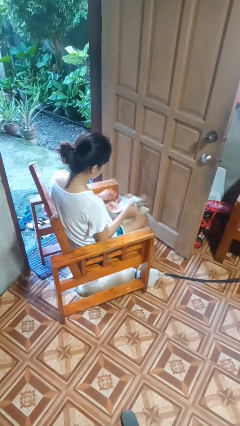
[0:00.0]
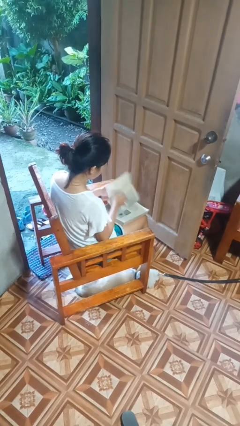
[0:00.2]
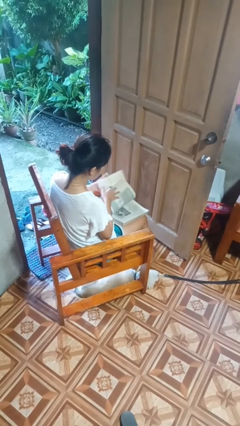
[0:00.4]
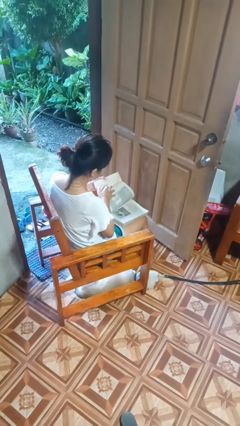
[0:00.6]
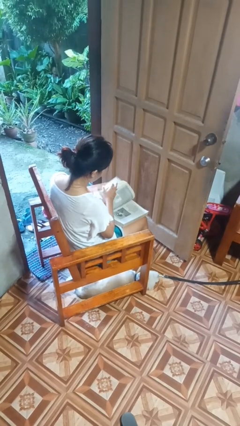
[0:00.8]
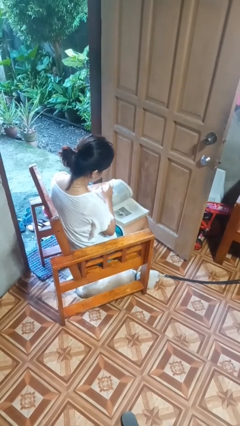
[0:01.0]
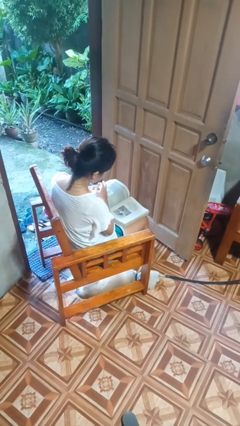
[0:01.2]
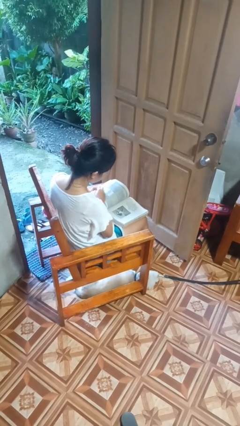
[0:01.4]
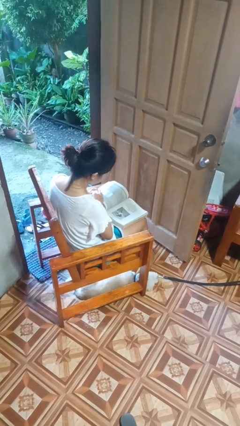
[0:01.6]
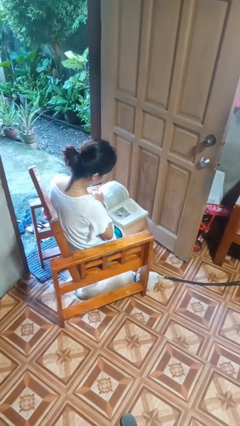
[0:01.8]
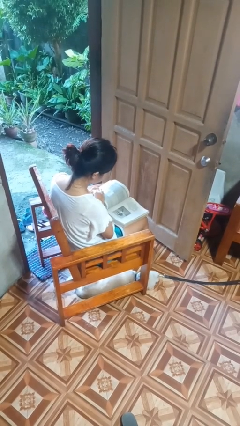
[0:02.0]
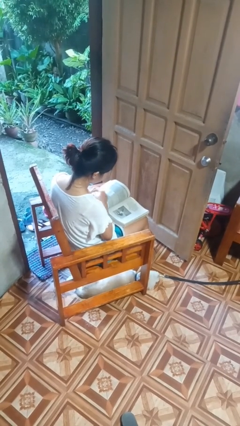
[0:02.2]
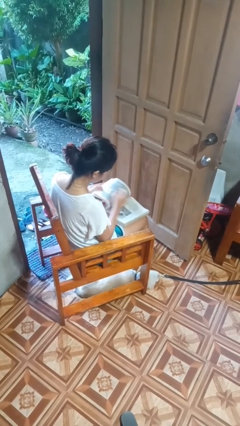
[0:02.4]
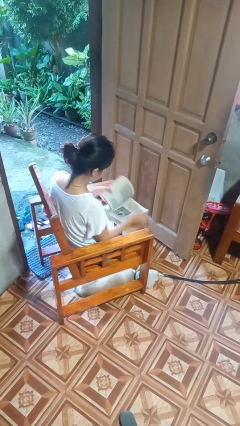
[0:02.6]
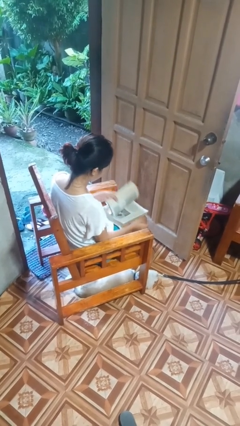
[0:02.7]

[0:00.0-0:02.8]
person reads book

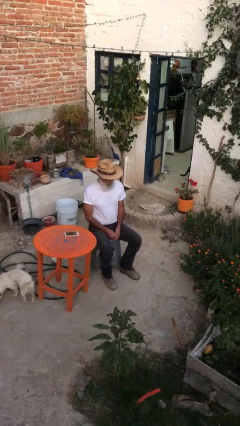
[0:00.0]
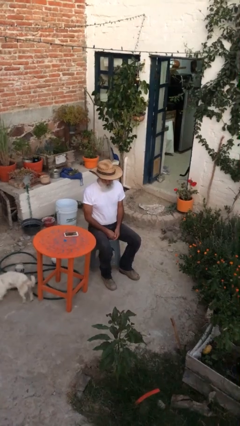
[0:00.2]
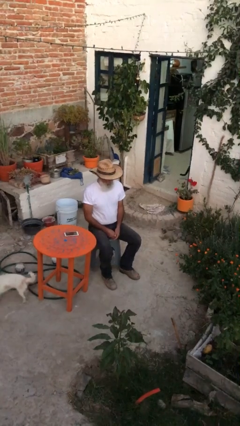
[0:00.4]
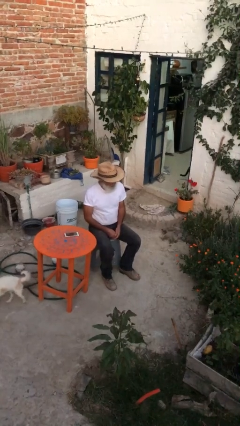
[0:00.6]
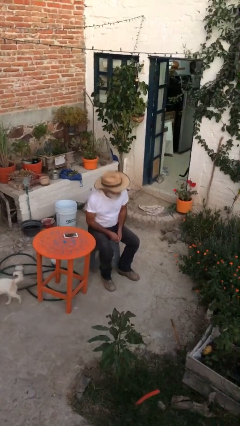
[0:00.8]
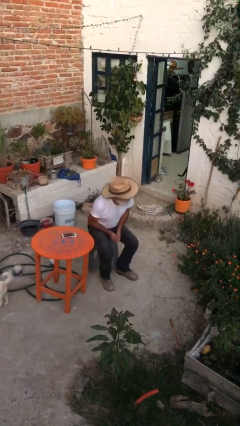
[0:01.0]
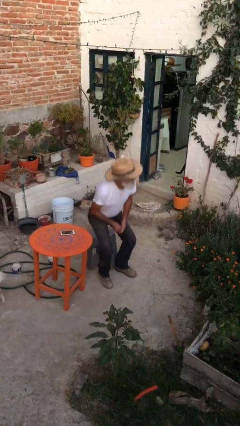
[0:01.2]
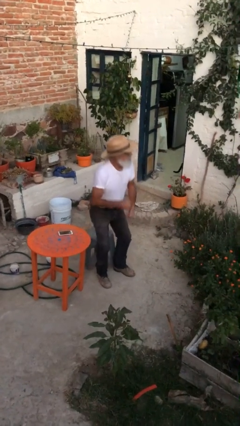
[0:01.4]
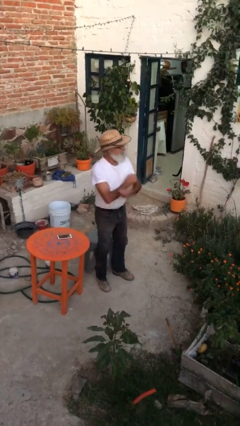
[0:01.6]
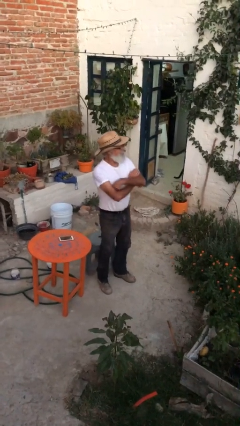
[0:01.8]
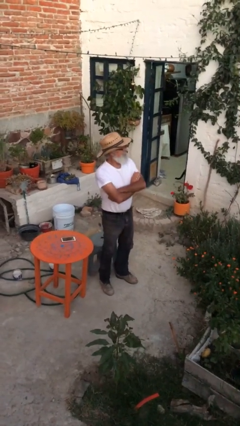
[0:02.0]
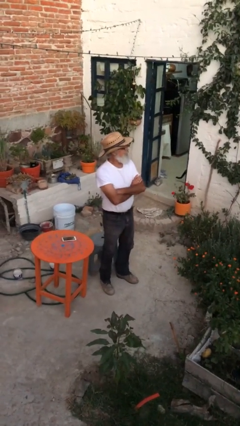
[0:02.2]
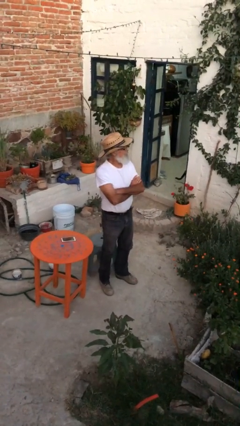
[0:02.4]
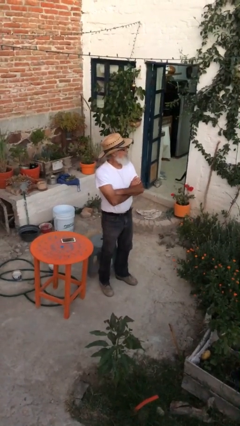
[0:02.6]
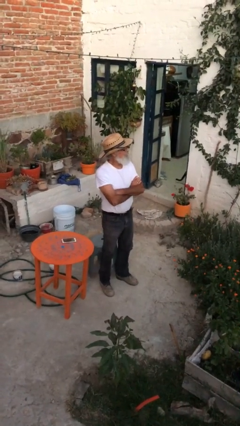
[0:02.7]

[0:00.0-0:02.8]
person stands up

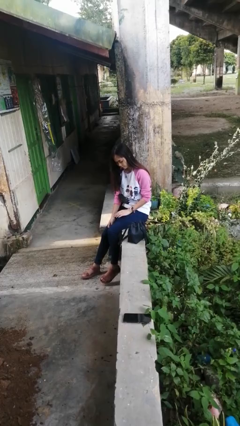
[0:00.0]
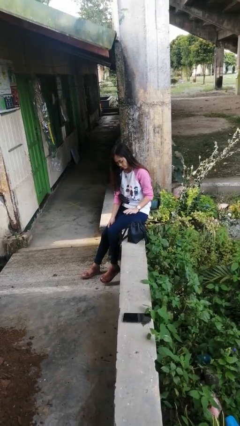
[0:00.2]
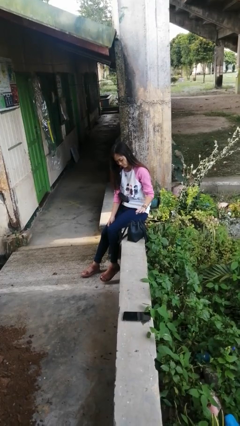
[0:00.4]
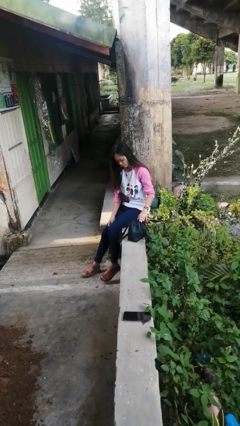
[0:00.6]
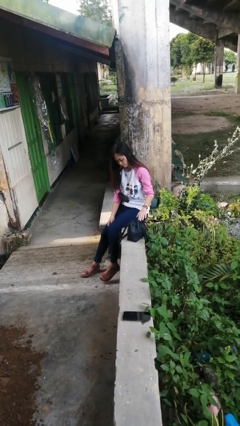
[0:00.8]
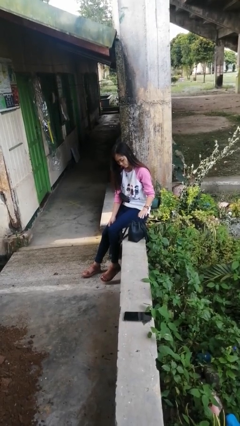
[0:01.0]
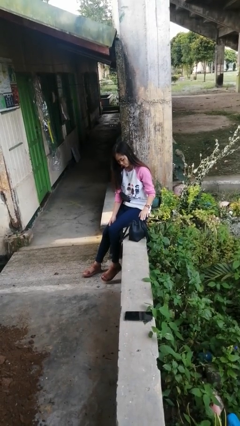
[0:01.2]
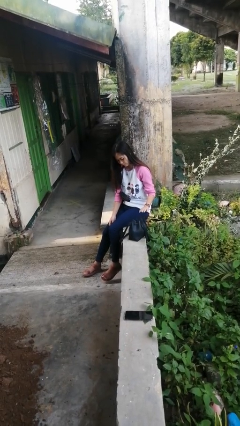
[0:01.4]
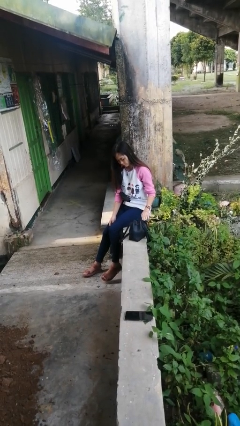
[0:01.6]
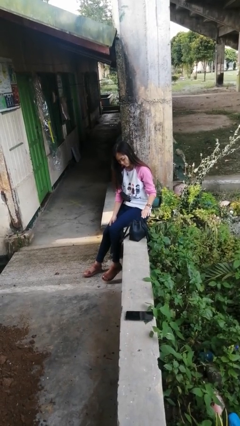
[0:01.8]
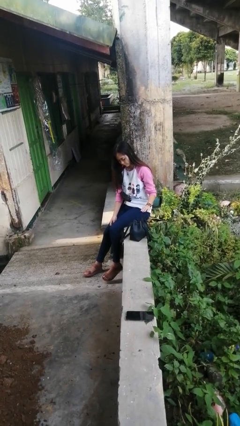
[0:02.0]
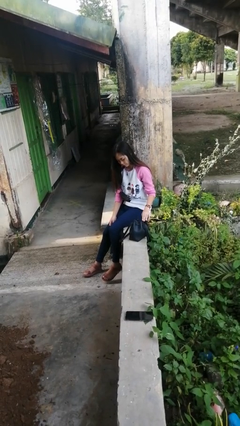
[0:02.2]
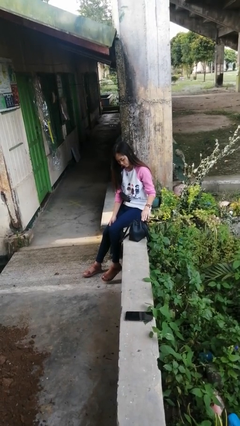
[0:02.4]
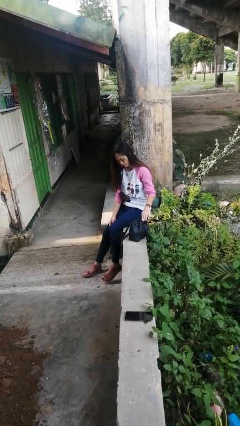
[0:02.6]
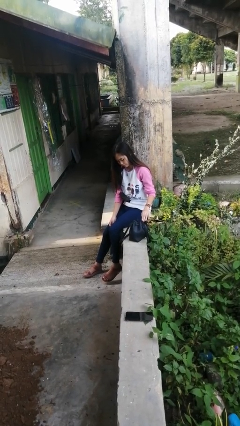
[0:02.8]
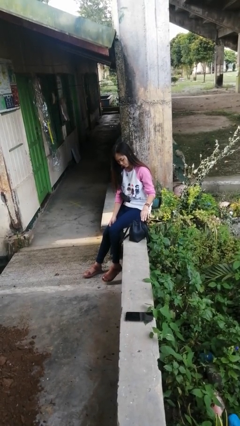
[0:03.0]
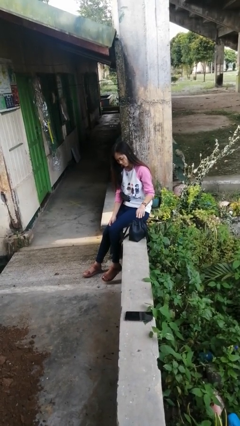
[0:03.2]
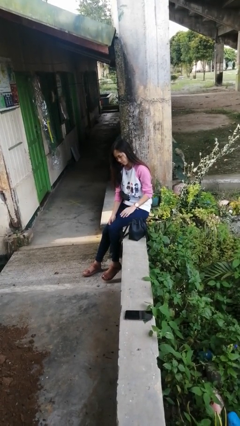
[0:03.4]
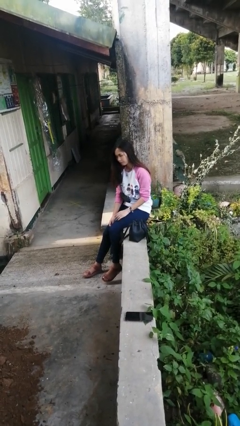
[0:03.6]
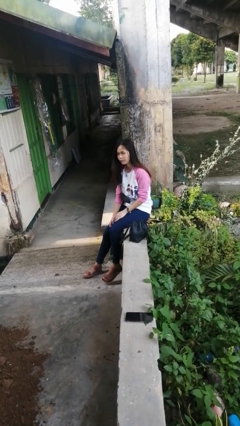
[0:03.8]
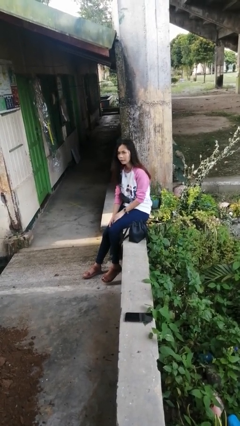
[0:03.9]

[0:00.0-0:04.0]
person taps object with finger

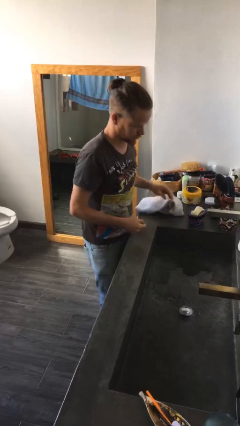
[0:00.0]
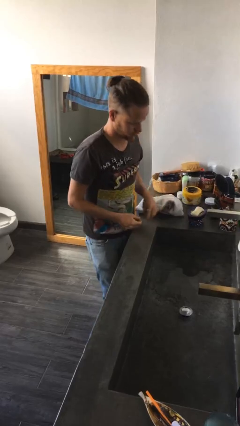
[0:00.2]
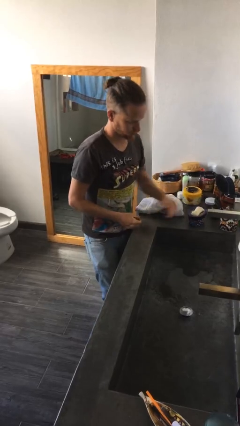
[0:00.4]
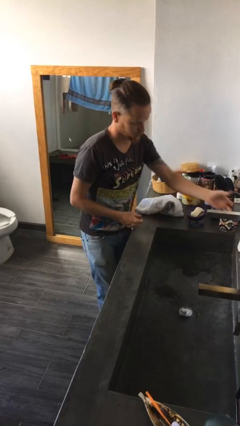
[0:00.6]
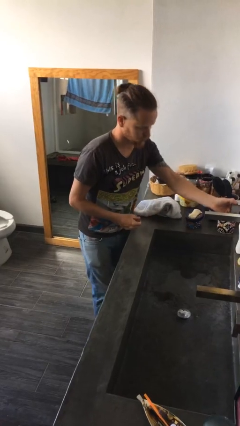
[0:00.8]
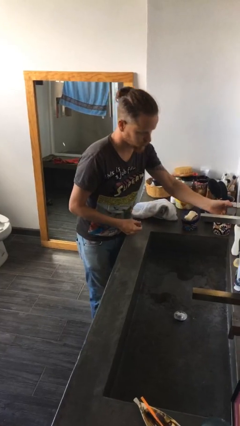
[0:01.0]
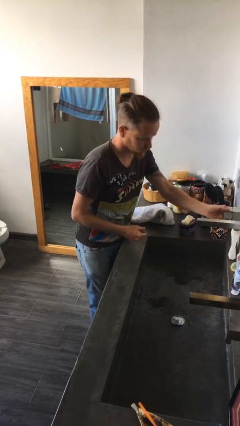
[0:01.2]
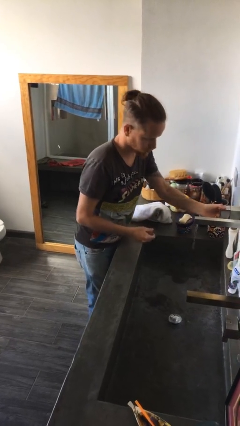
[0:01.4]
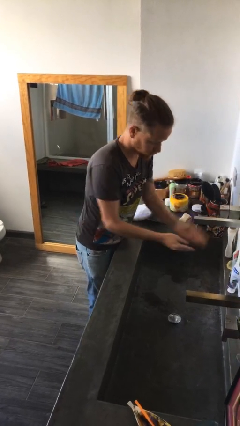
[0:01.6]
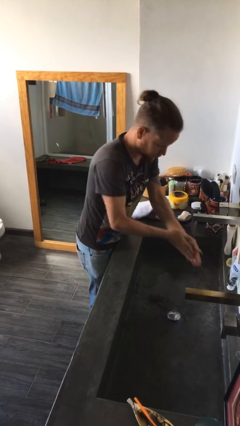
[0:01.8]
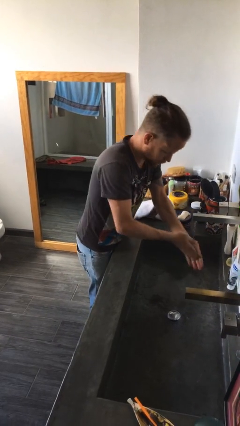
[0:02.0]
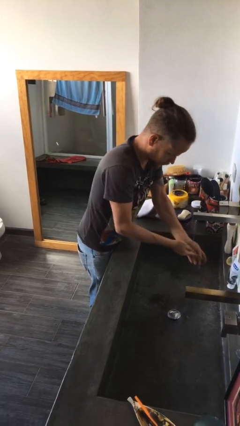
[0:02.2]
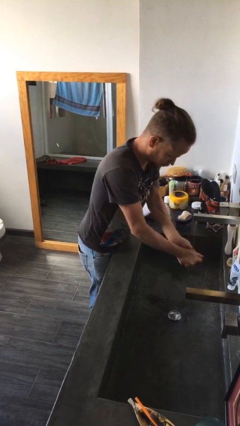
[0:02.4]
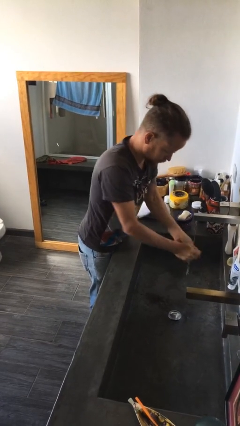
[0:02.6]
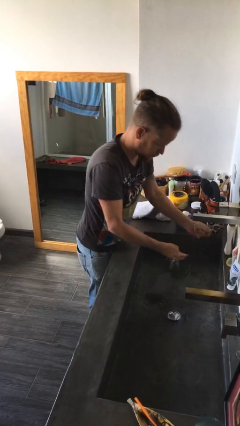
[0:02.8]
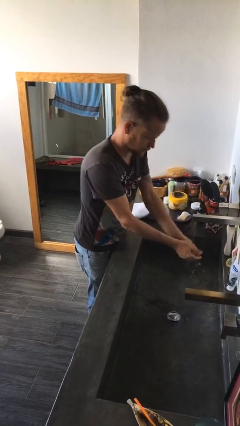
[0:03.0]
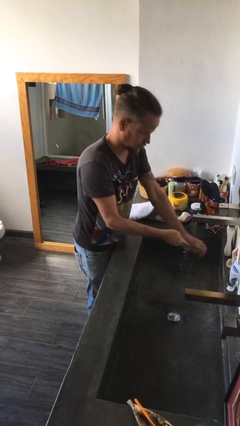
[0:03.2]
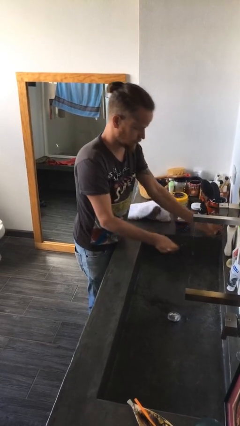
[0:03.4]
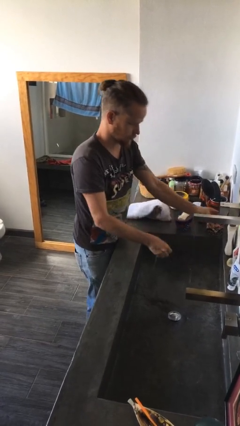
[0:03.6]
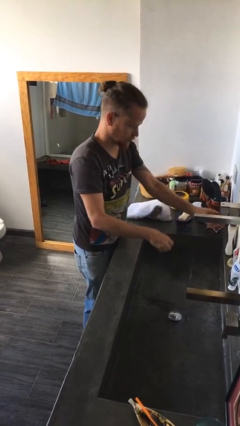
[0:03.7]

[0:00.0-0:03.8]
person washes hands

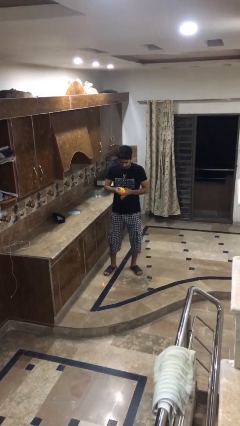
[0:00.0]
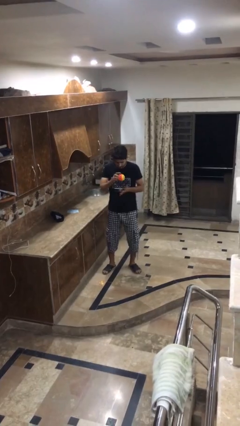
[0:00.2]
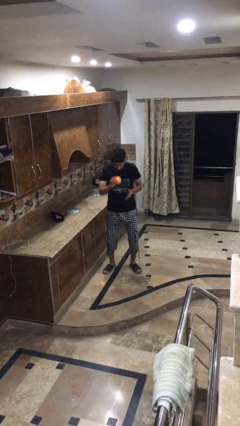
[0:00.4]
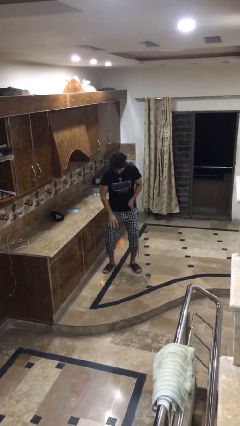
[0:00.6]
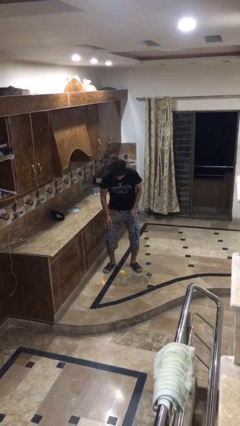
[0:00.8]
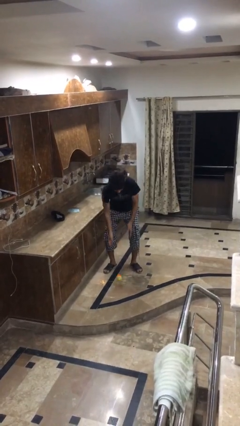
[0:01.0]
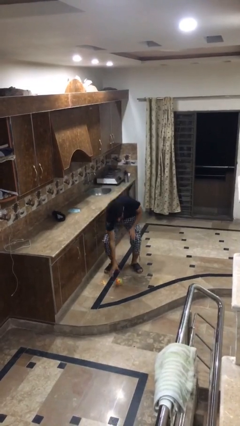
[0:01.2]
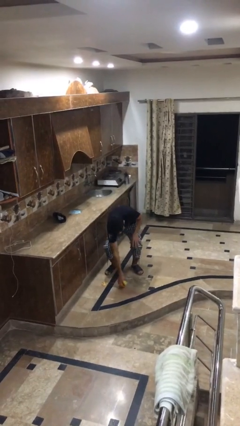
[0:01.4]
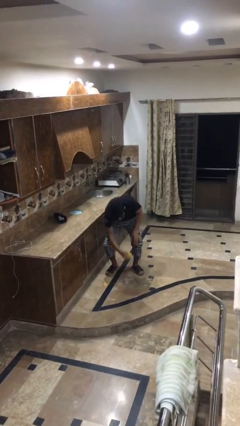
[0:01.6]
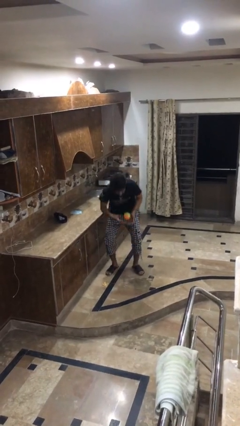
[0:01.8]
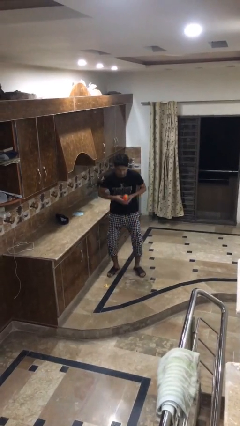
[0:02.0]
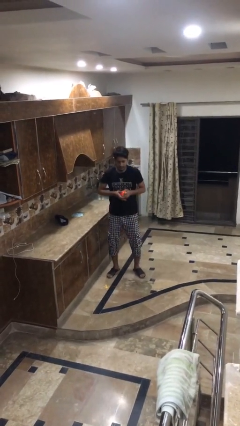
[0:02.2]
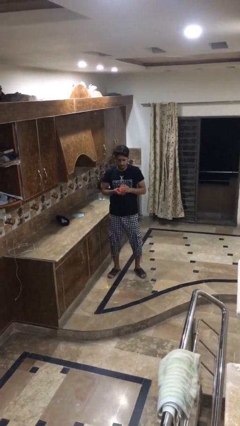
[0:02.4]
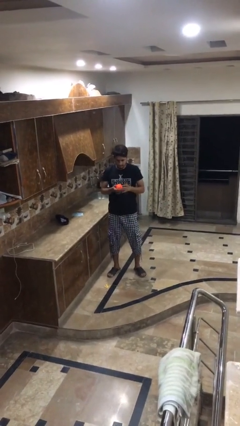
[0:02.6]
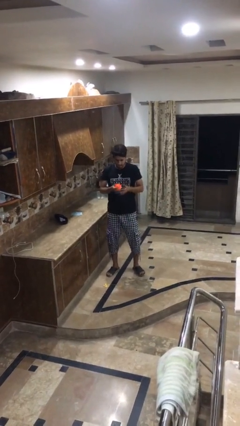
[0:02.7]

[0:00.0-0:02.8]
person bounces ball on floor

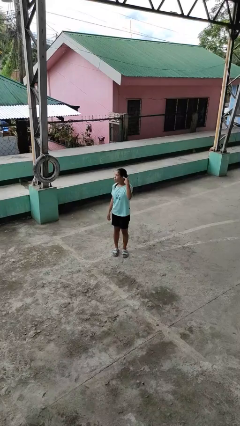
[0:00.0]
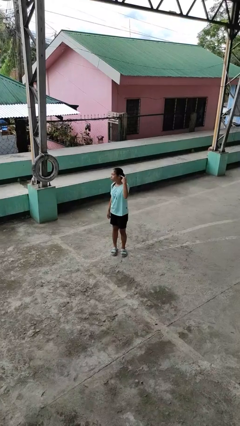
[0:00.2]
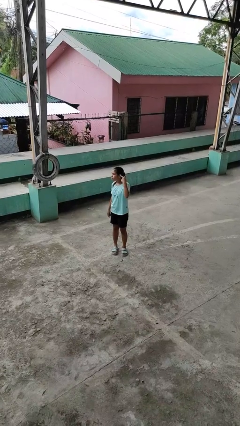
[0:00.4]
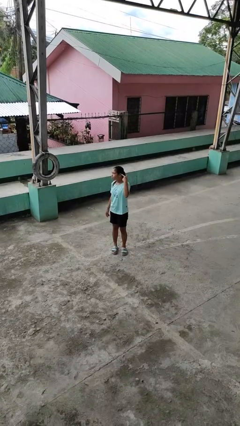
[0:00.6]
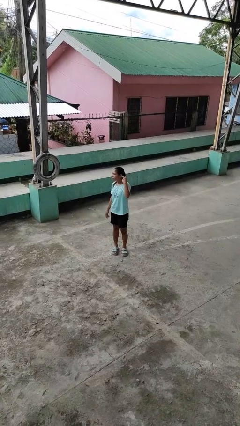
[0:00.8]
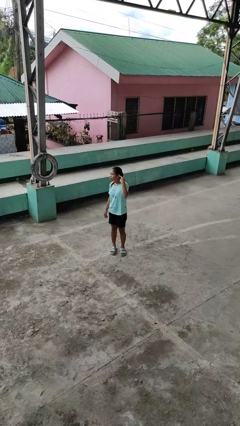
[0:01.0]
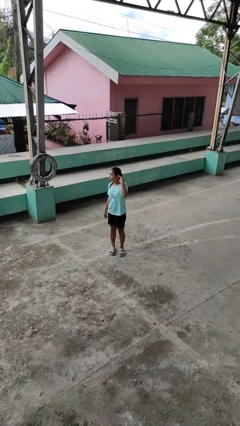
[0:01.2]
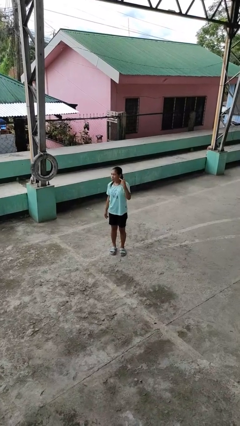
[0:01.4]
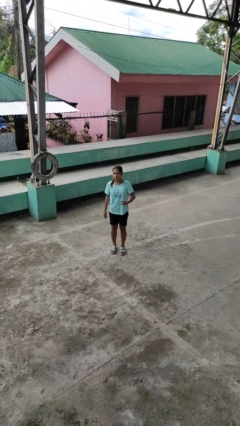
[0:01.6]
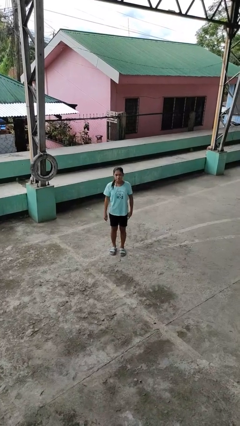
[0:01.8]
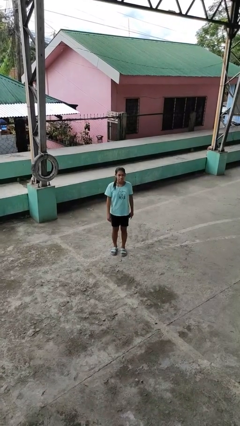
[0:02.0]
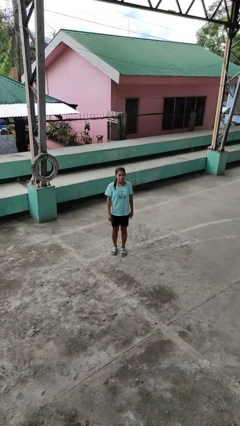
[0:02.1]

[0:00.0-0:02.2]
person gestures listen closely
